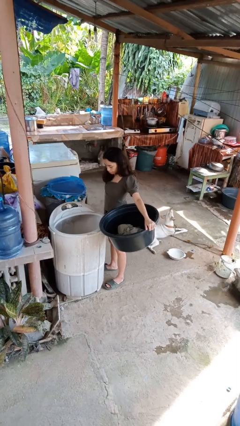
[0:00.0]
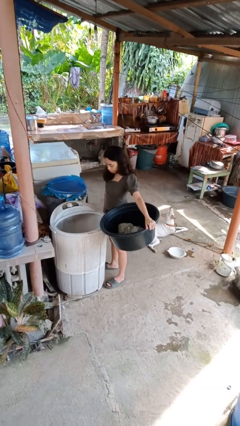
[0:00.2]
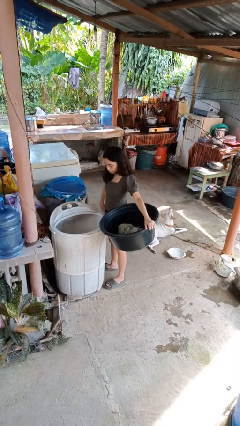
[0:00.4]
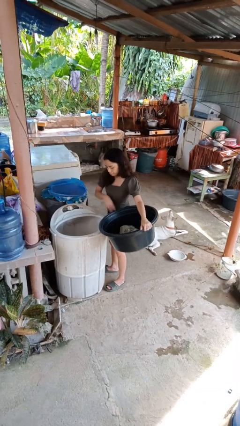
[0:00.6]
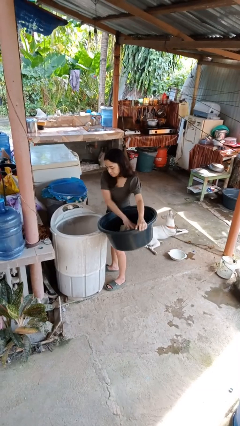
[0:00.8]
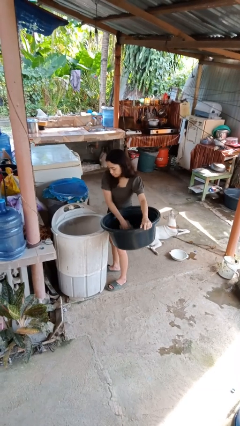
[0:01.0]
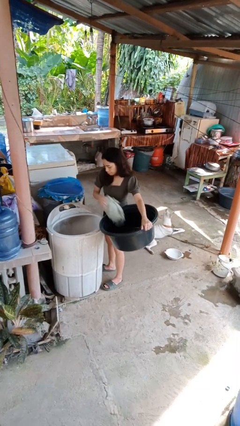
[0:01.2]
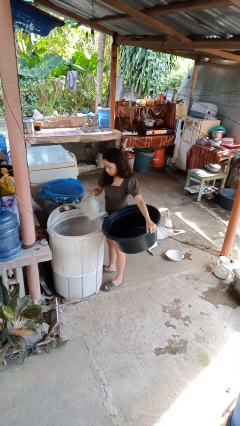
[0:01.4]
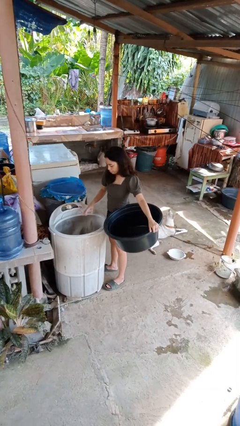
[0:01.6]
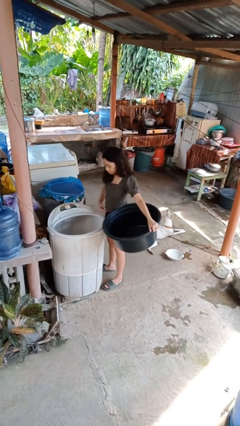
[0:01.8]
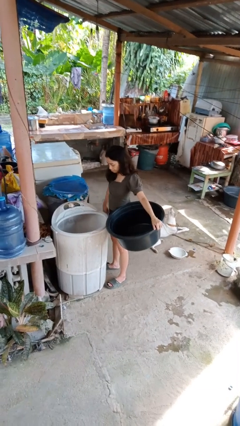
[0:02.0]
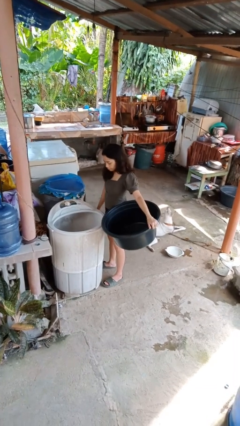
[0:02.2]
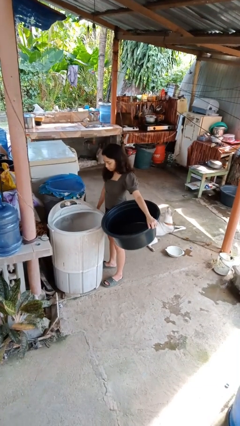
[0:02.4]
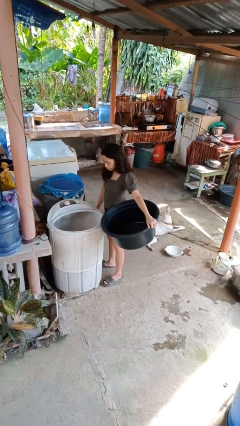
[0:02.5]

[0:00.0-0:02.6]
person loads clotheswasher

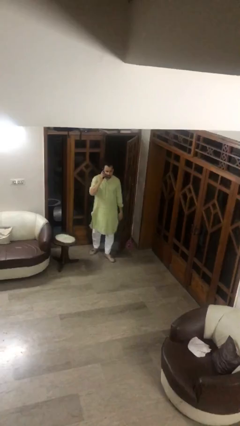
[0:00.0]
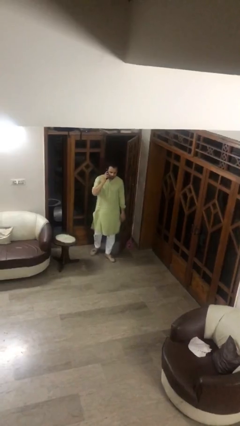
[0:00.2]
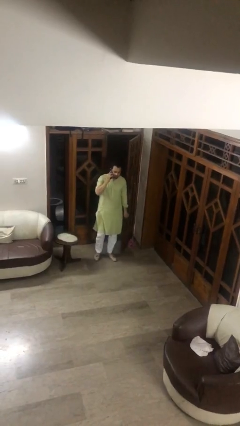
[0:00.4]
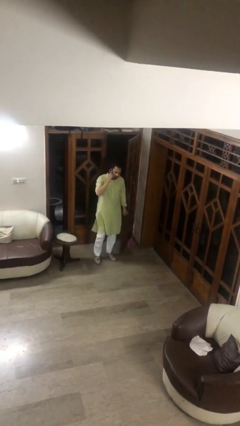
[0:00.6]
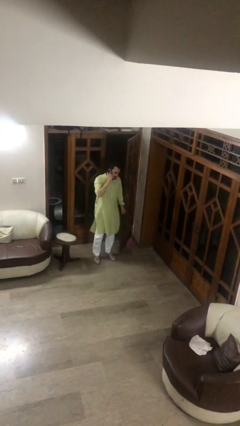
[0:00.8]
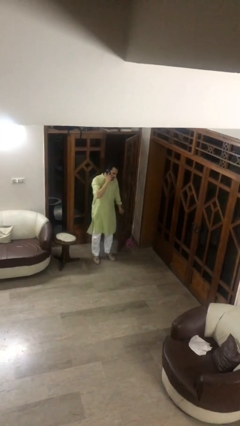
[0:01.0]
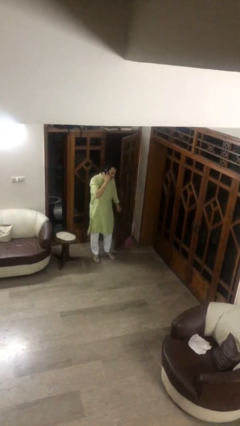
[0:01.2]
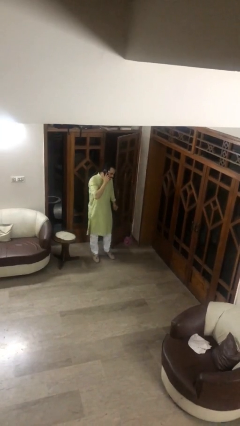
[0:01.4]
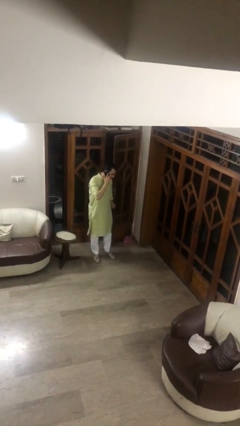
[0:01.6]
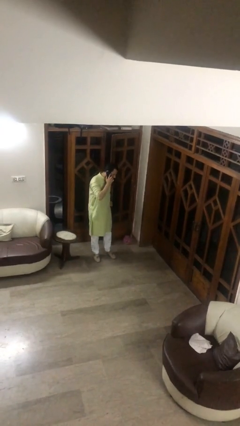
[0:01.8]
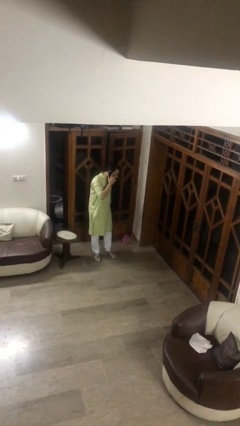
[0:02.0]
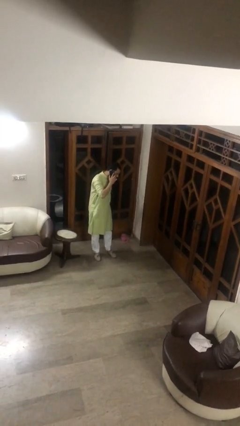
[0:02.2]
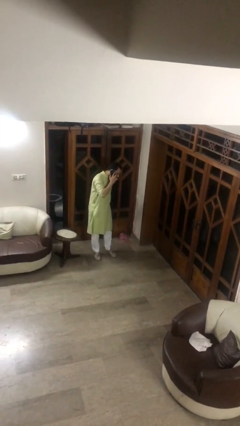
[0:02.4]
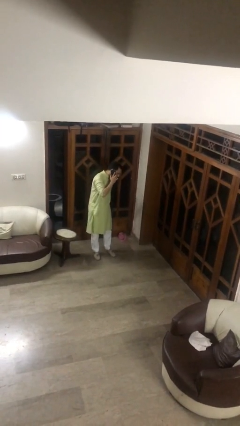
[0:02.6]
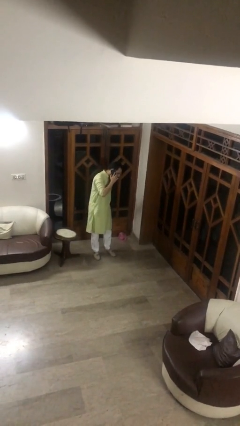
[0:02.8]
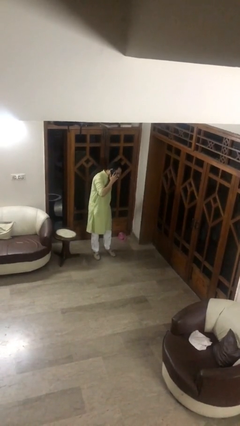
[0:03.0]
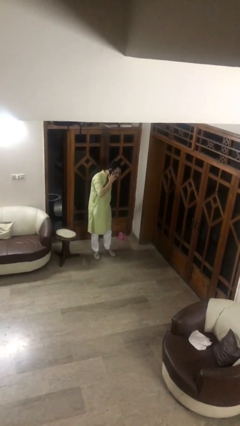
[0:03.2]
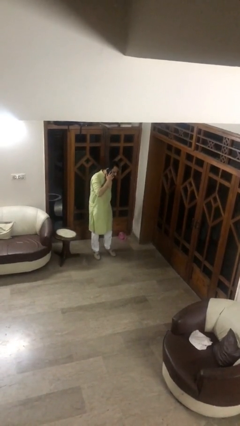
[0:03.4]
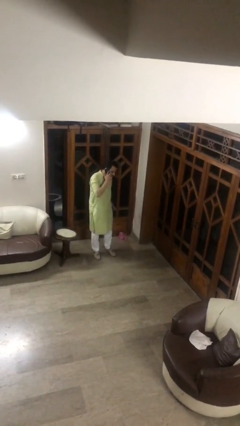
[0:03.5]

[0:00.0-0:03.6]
person closes facility door

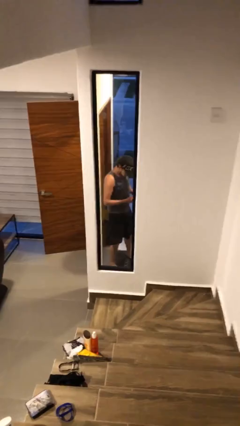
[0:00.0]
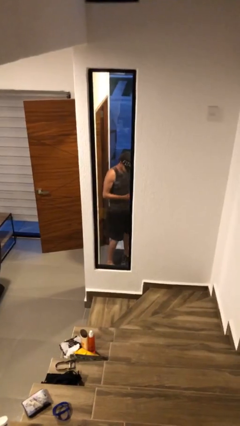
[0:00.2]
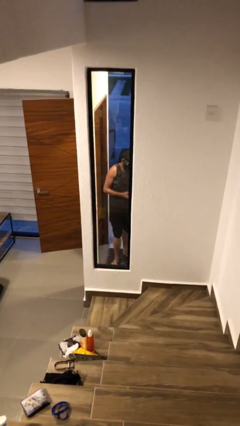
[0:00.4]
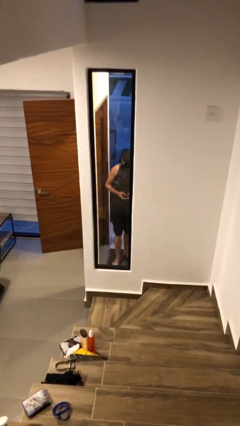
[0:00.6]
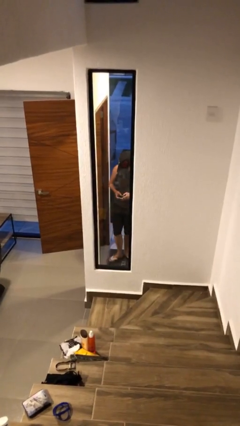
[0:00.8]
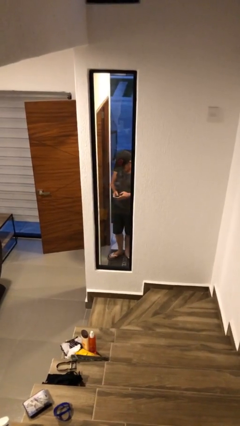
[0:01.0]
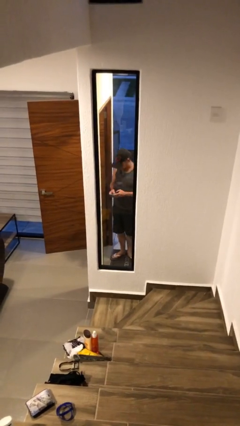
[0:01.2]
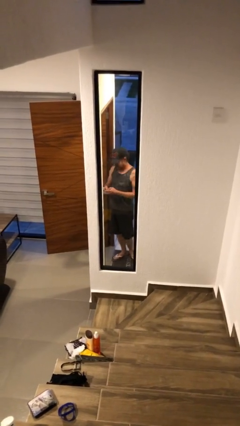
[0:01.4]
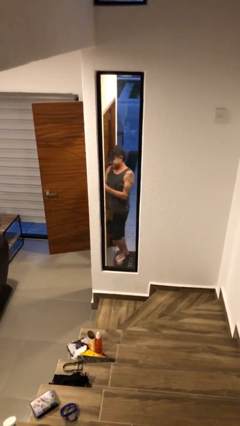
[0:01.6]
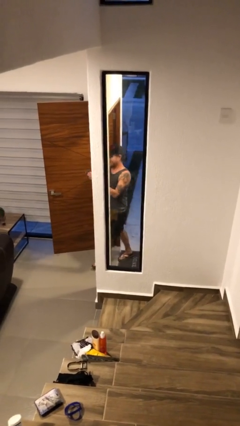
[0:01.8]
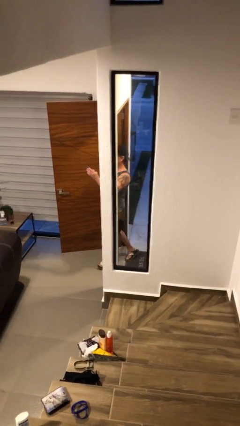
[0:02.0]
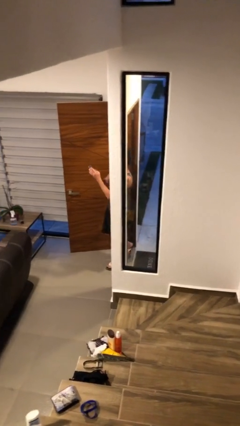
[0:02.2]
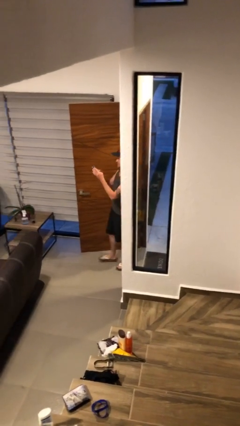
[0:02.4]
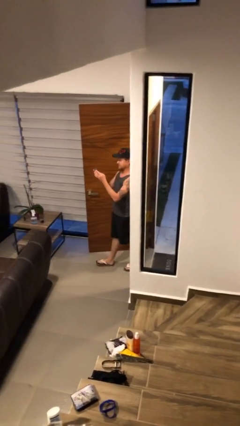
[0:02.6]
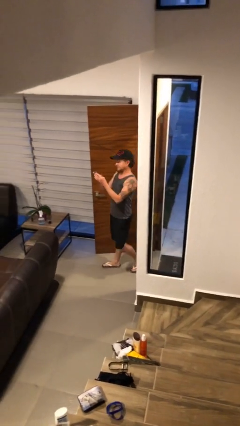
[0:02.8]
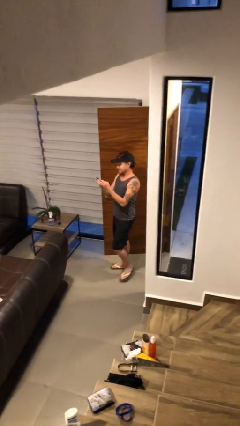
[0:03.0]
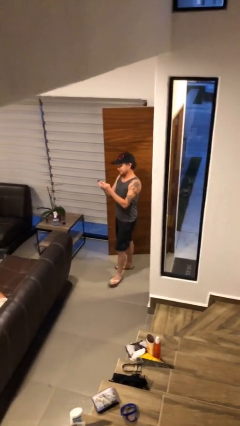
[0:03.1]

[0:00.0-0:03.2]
person enters scene through structure

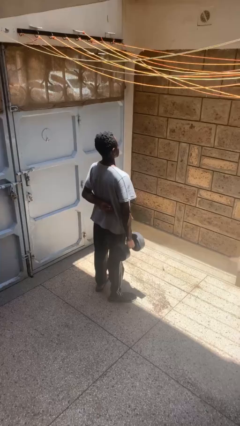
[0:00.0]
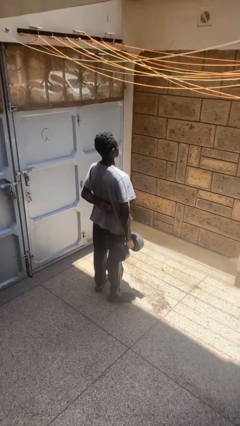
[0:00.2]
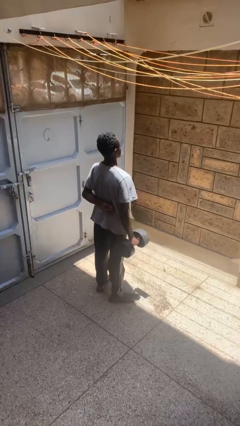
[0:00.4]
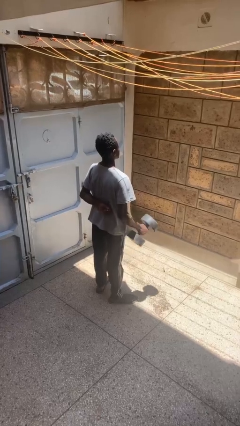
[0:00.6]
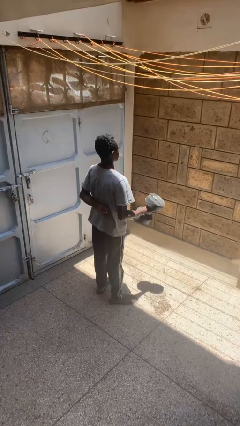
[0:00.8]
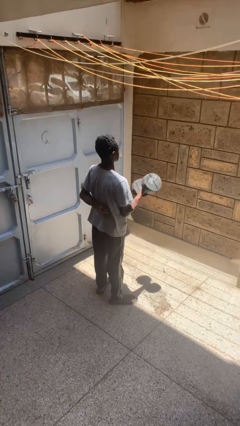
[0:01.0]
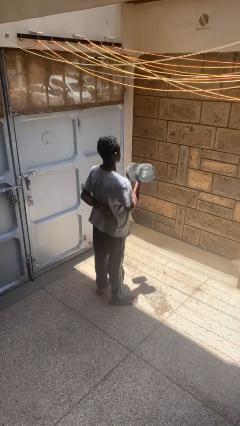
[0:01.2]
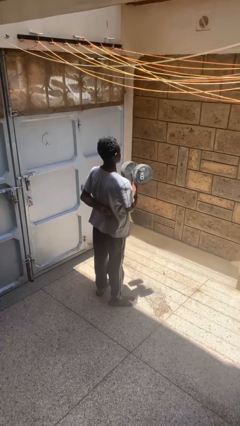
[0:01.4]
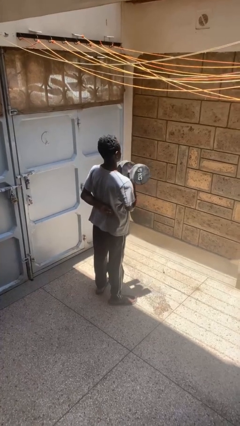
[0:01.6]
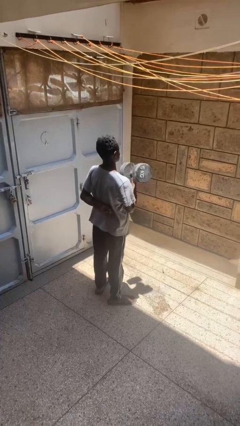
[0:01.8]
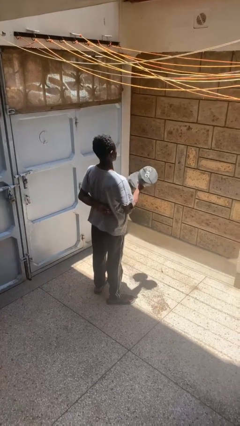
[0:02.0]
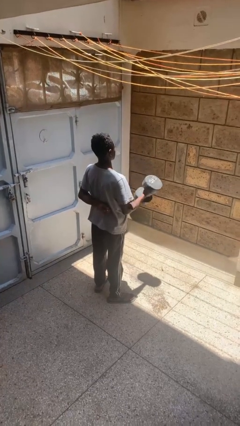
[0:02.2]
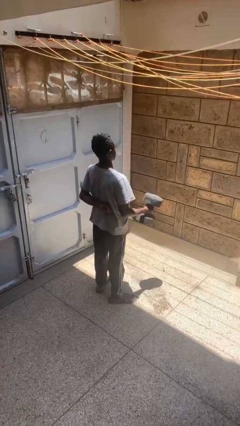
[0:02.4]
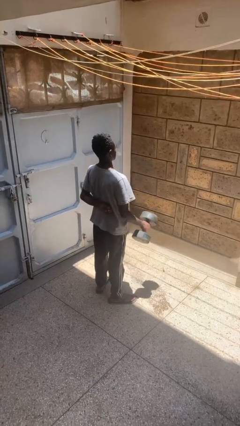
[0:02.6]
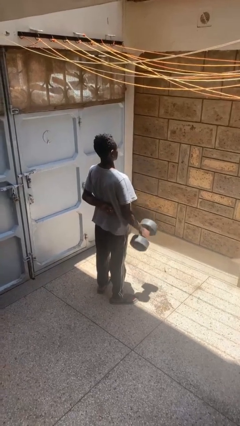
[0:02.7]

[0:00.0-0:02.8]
person lifts dumbbells

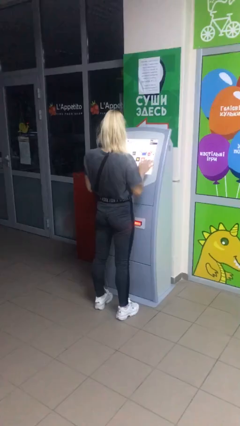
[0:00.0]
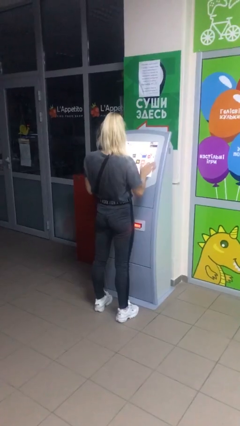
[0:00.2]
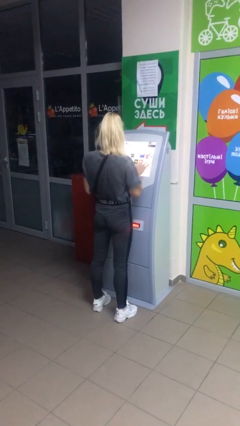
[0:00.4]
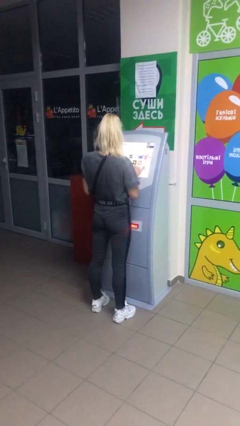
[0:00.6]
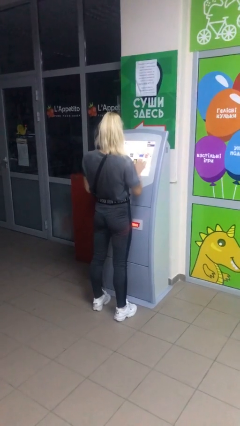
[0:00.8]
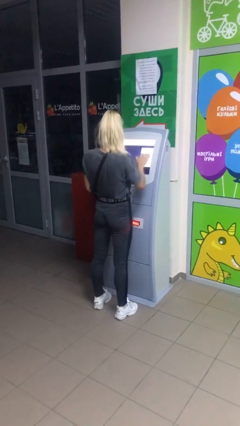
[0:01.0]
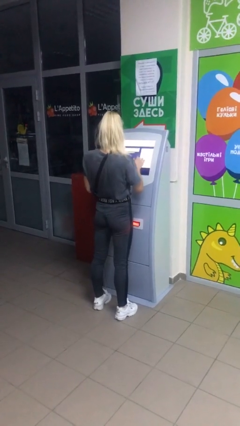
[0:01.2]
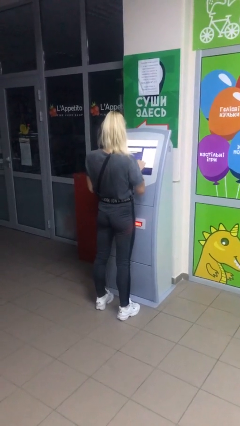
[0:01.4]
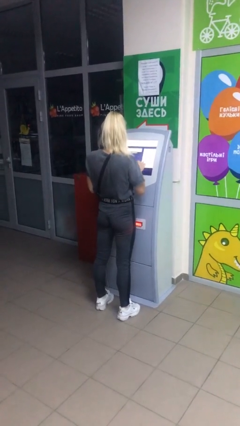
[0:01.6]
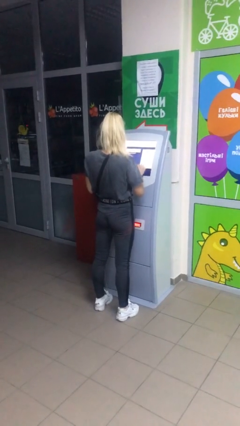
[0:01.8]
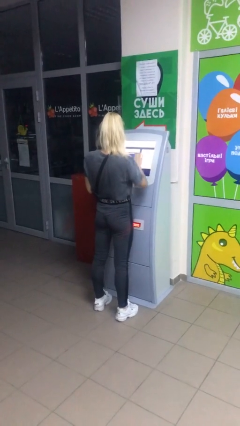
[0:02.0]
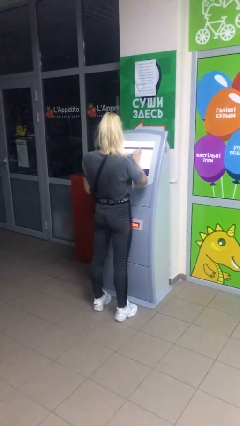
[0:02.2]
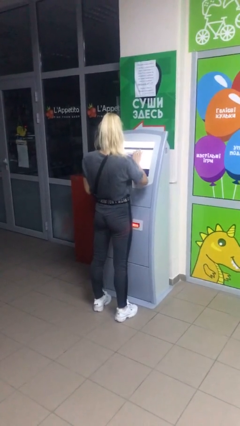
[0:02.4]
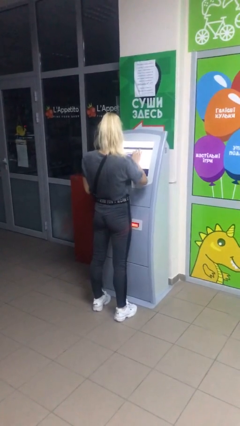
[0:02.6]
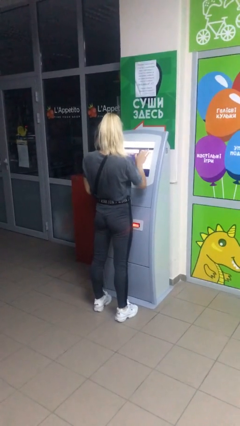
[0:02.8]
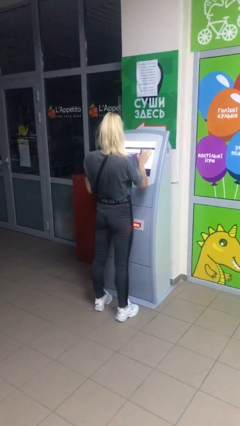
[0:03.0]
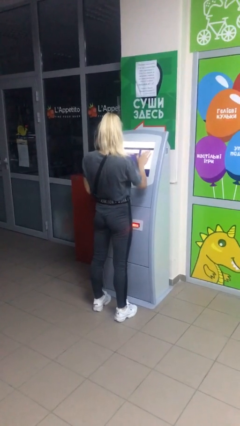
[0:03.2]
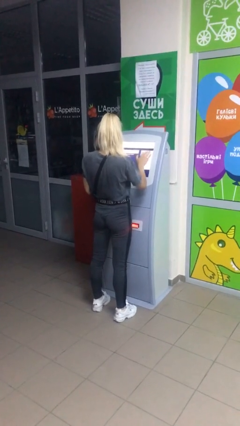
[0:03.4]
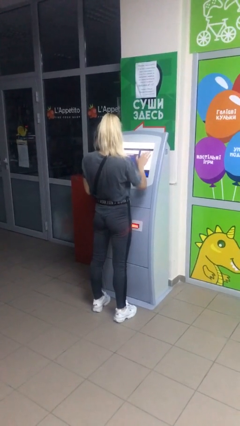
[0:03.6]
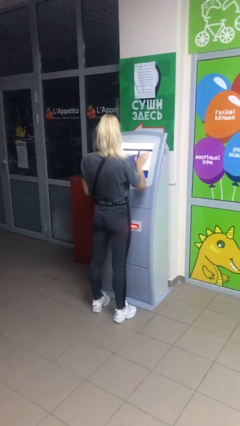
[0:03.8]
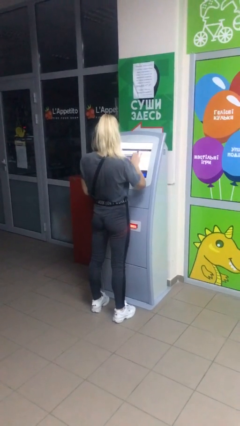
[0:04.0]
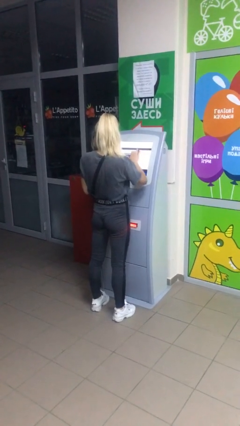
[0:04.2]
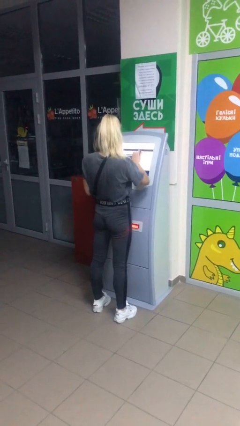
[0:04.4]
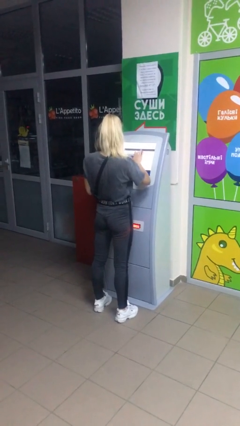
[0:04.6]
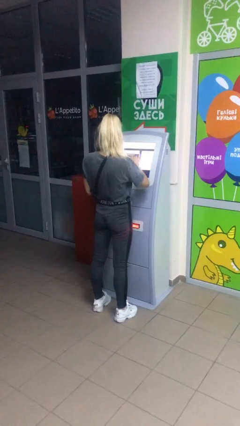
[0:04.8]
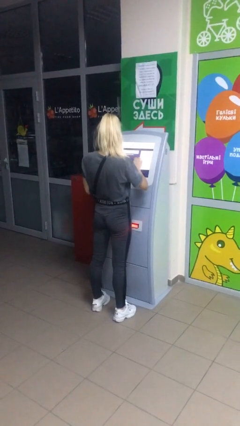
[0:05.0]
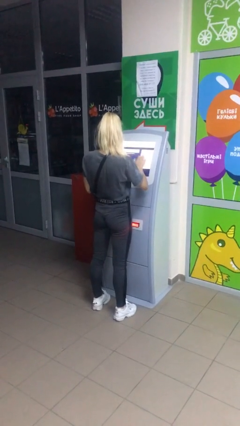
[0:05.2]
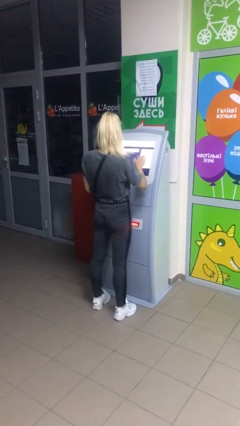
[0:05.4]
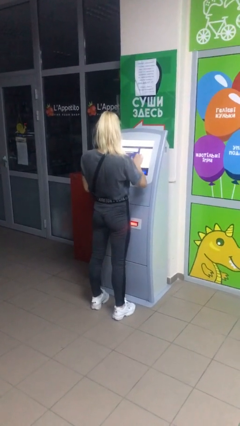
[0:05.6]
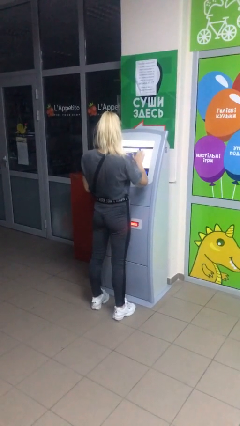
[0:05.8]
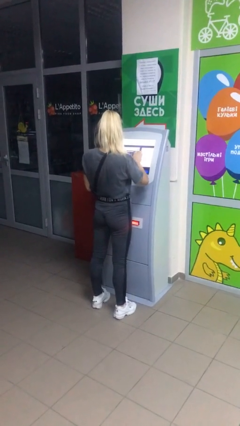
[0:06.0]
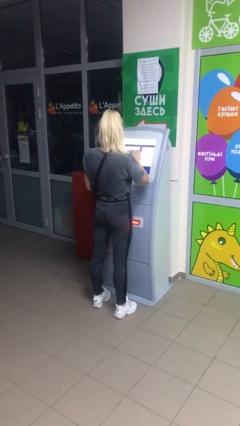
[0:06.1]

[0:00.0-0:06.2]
person purchases from machine
